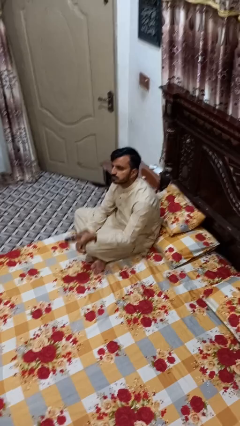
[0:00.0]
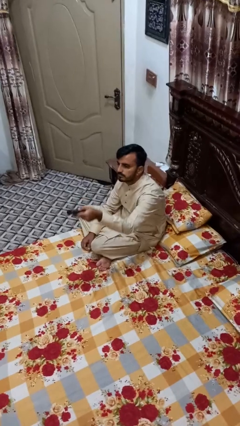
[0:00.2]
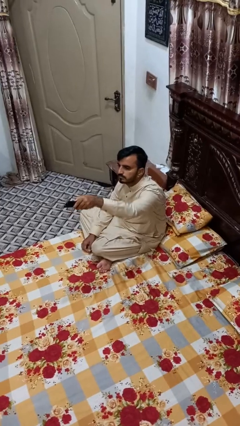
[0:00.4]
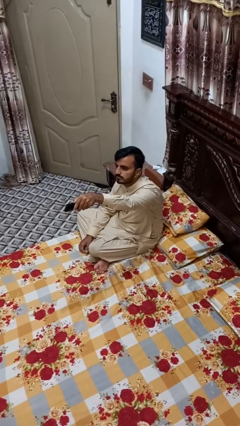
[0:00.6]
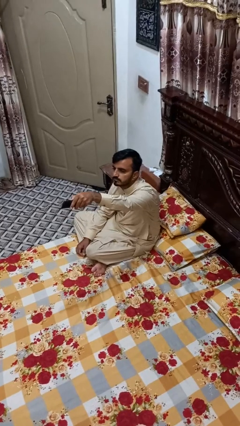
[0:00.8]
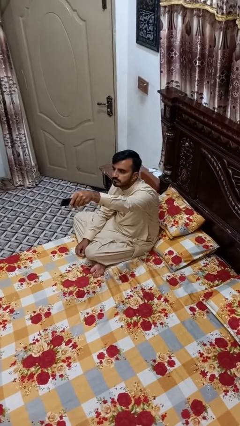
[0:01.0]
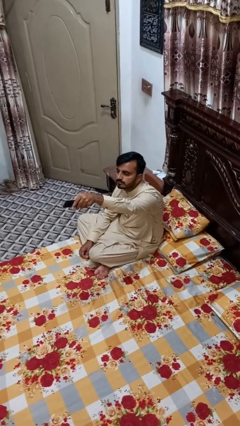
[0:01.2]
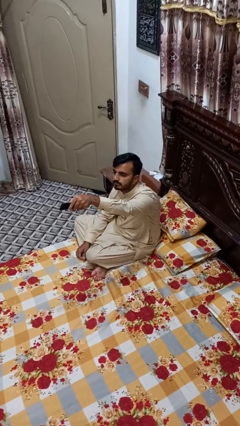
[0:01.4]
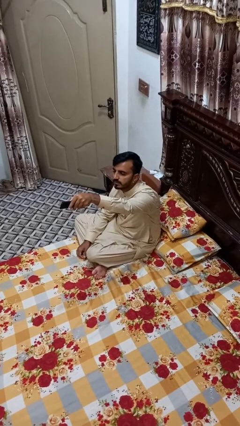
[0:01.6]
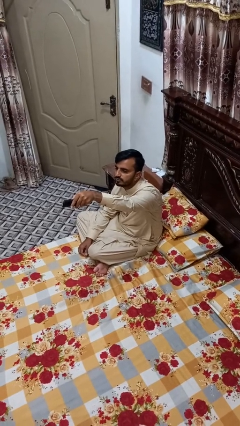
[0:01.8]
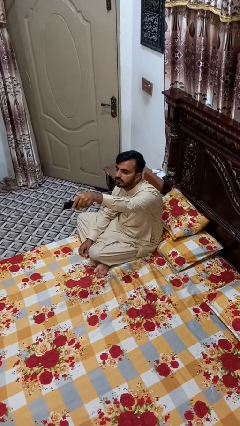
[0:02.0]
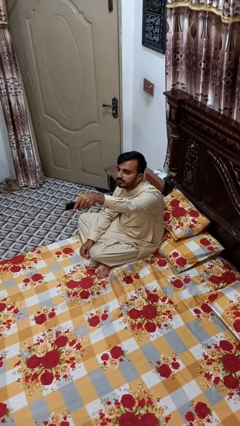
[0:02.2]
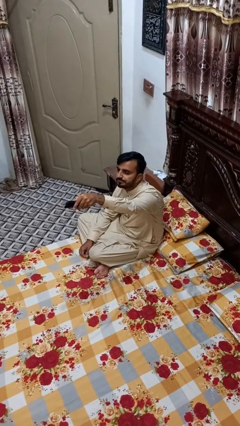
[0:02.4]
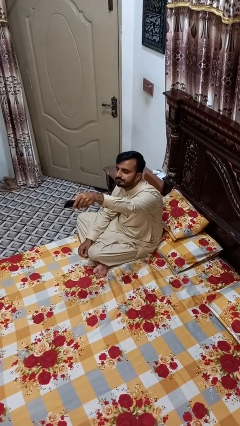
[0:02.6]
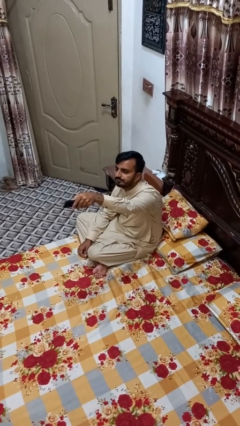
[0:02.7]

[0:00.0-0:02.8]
person uses television remote

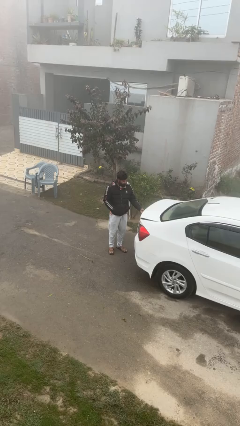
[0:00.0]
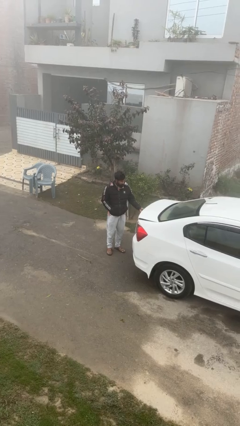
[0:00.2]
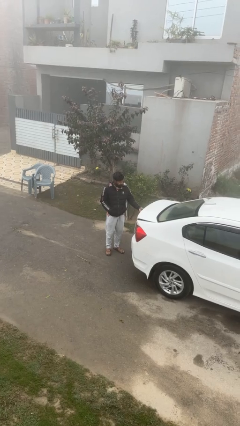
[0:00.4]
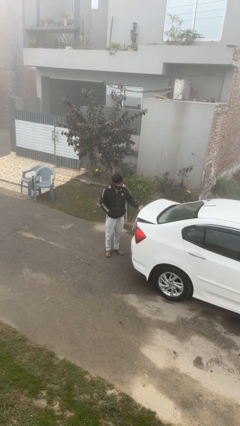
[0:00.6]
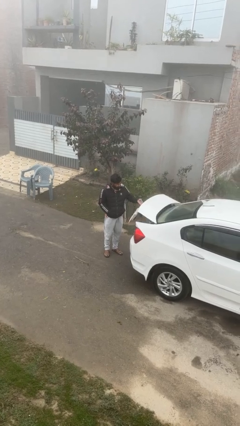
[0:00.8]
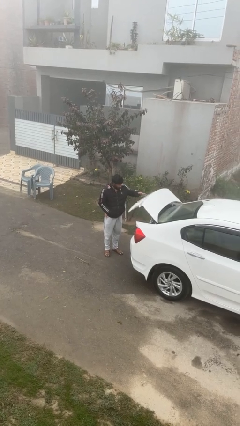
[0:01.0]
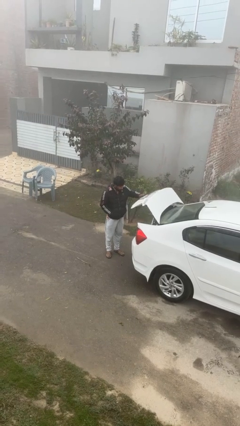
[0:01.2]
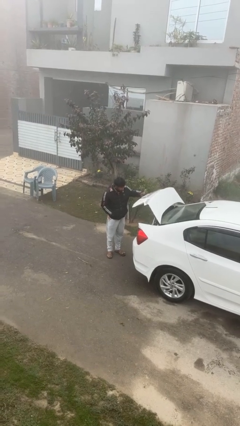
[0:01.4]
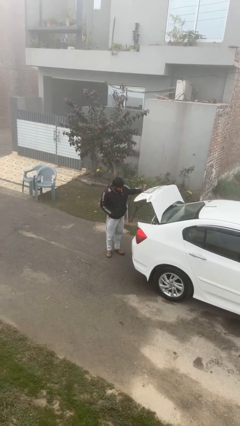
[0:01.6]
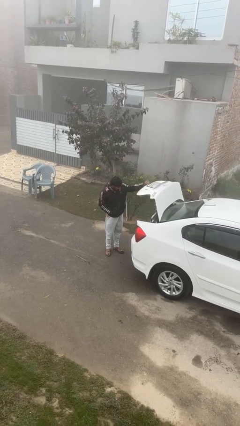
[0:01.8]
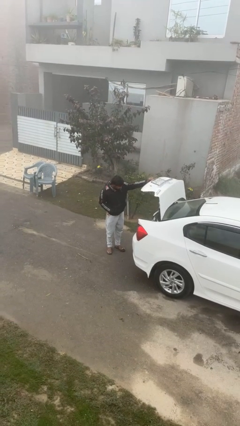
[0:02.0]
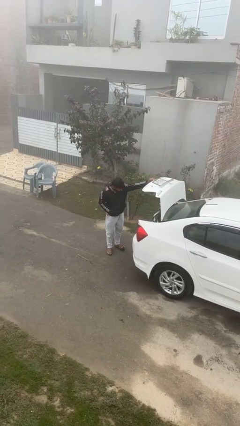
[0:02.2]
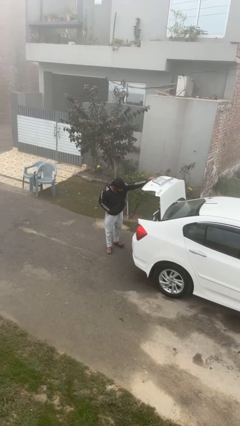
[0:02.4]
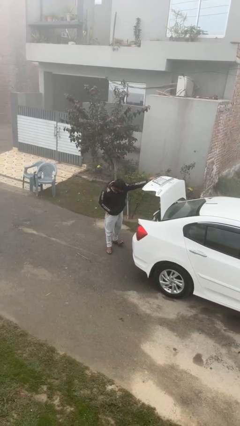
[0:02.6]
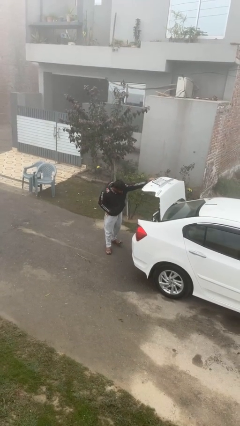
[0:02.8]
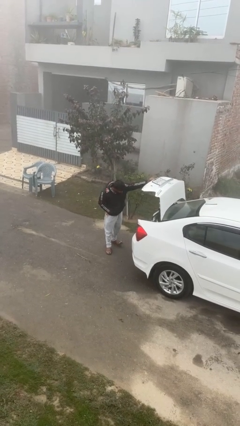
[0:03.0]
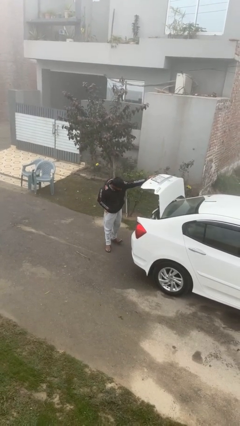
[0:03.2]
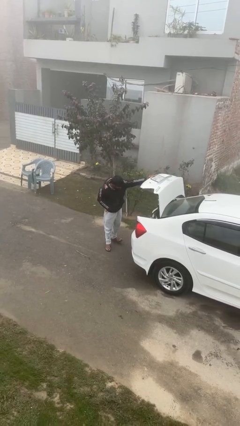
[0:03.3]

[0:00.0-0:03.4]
person opens car trunk

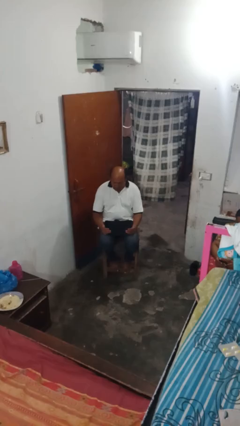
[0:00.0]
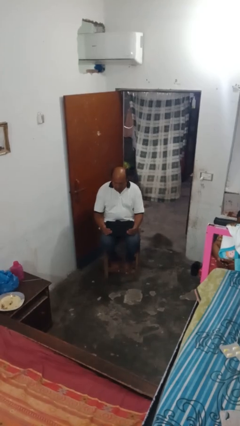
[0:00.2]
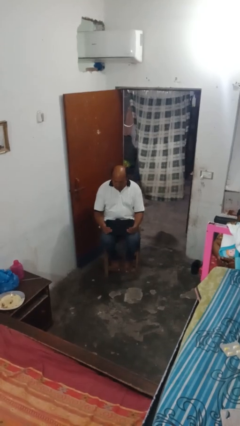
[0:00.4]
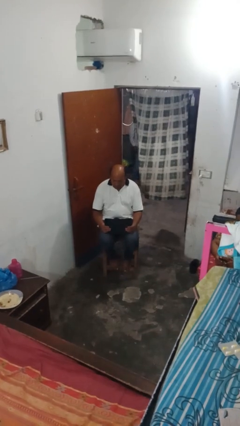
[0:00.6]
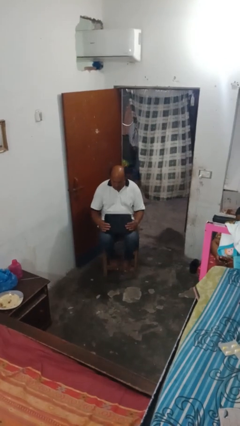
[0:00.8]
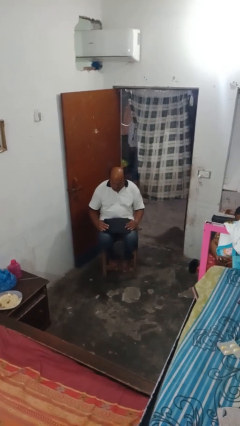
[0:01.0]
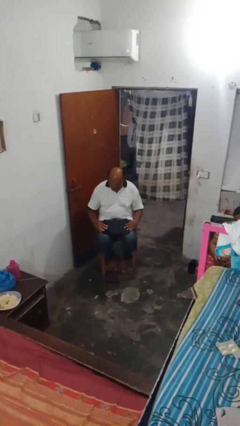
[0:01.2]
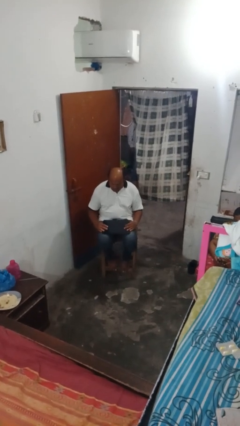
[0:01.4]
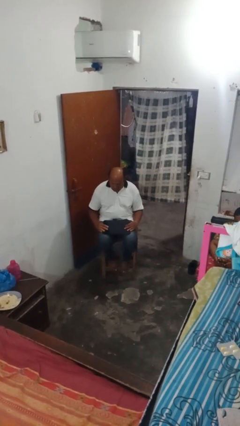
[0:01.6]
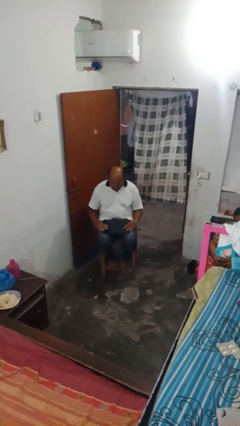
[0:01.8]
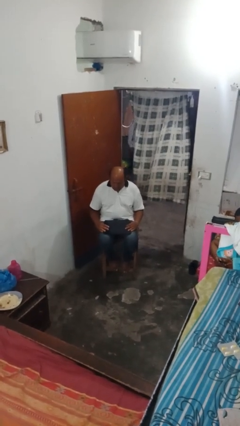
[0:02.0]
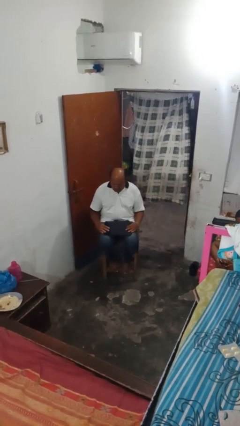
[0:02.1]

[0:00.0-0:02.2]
person closes laptop

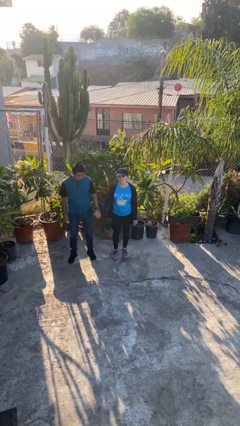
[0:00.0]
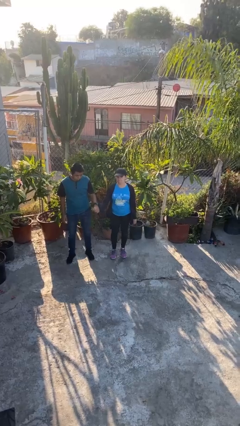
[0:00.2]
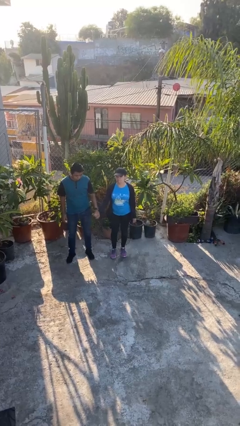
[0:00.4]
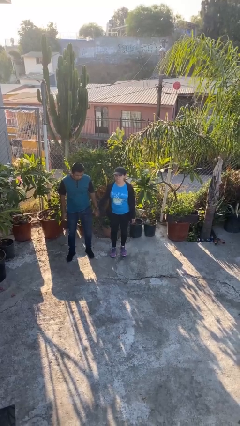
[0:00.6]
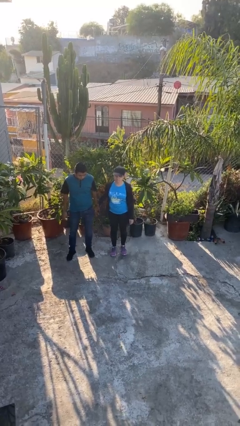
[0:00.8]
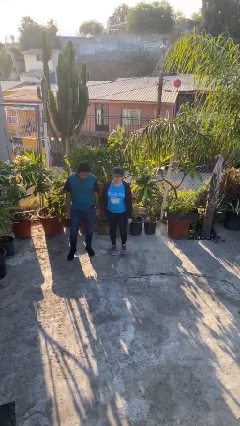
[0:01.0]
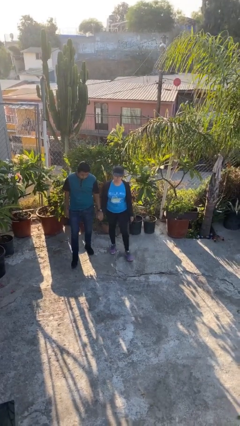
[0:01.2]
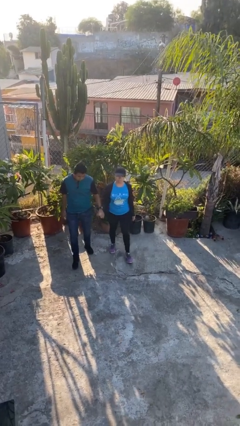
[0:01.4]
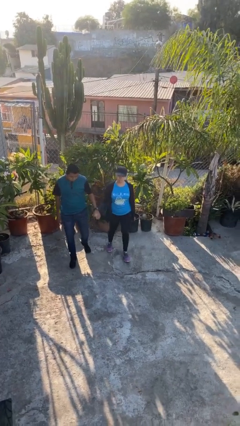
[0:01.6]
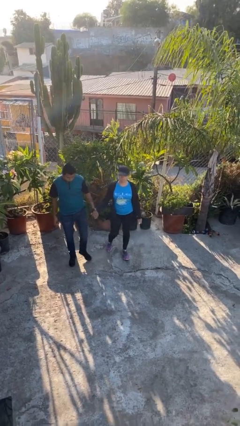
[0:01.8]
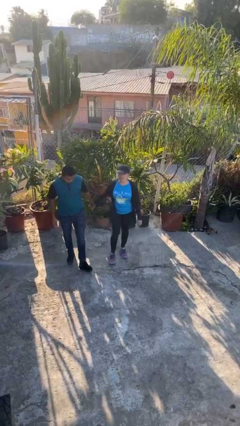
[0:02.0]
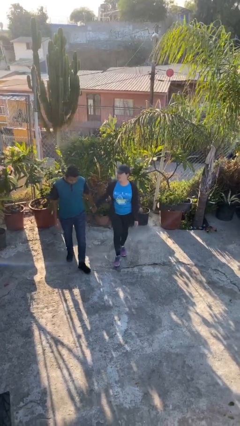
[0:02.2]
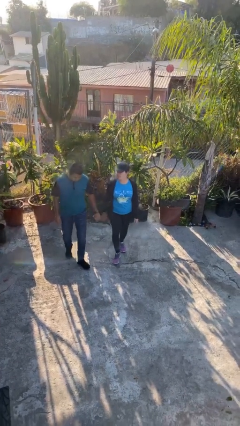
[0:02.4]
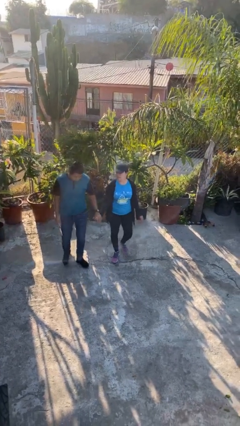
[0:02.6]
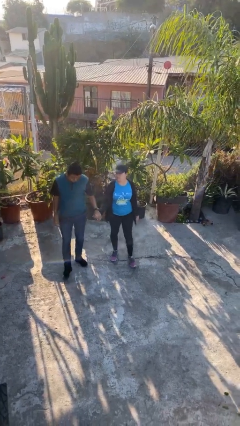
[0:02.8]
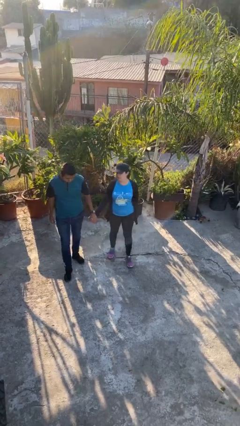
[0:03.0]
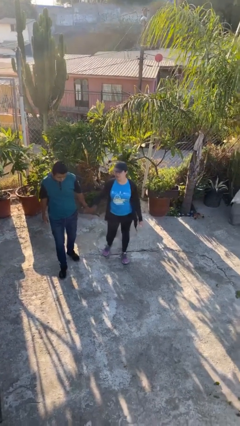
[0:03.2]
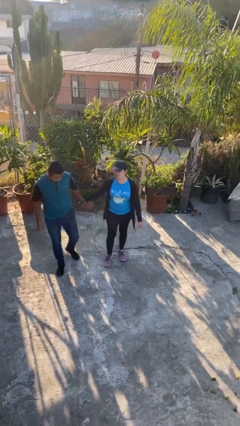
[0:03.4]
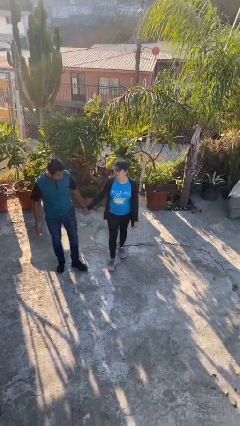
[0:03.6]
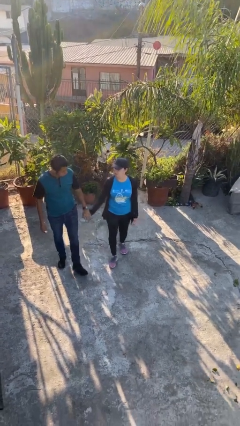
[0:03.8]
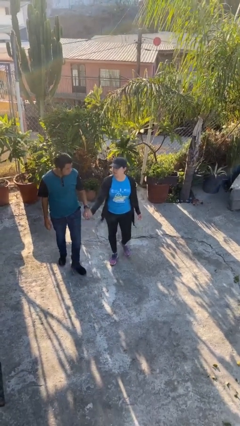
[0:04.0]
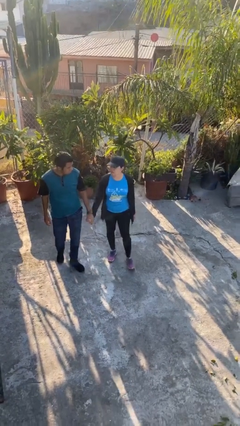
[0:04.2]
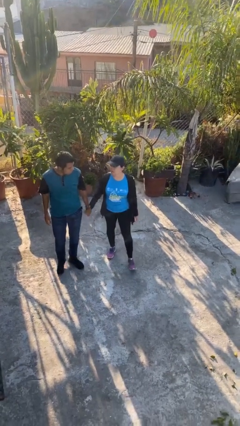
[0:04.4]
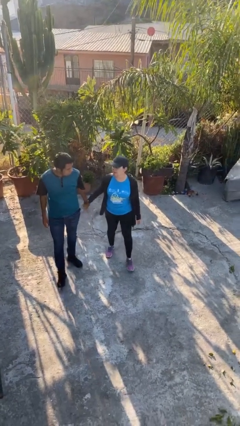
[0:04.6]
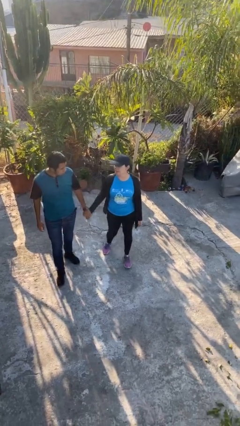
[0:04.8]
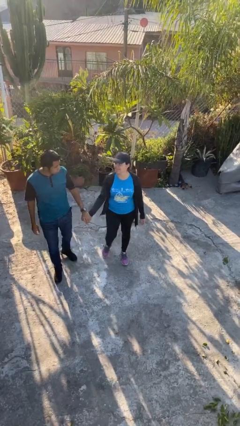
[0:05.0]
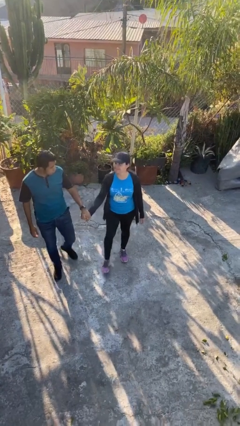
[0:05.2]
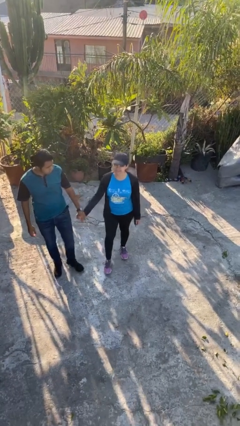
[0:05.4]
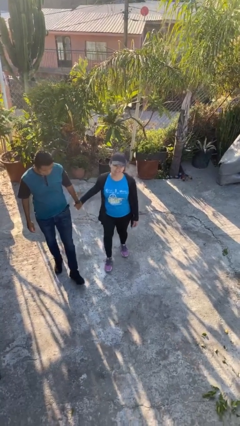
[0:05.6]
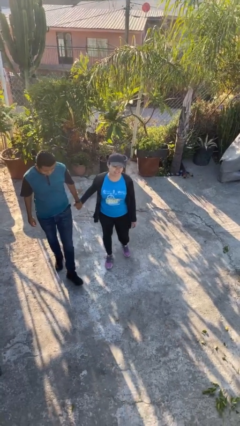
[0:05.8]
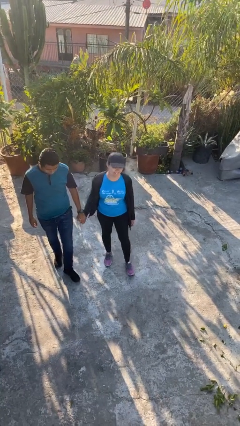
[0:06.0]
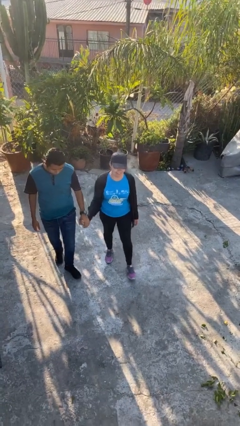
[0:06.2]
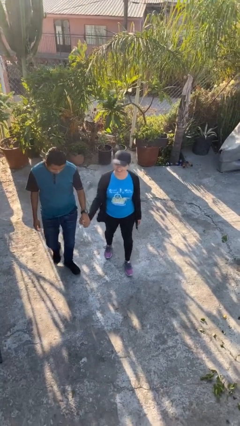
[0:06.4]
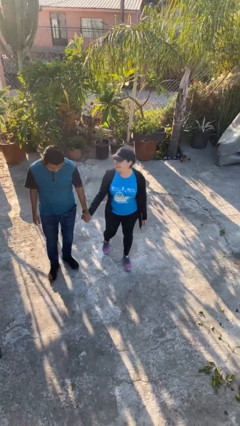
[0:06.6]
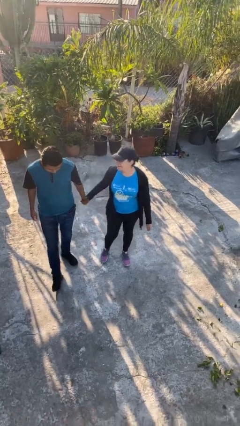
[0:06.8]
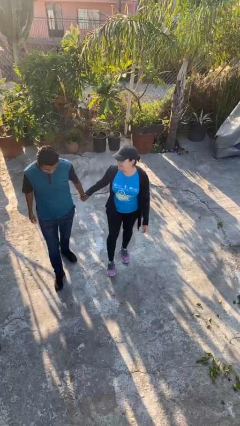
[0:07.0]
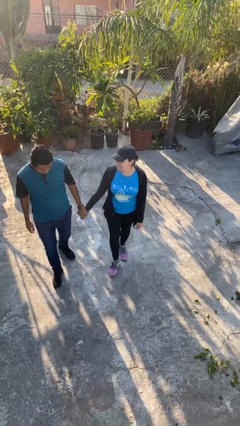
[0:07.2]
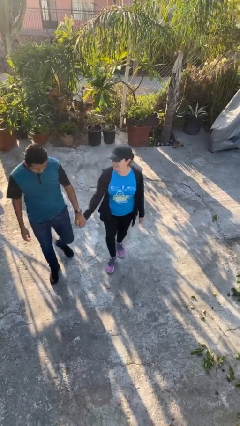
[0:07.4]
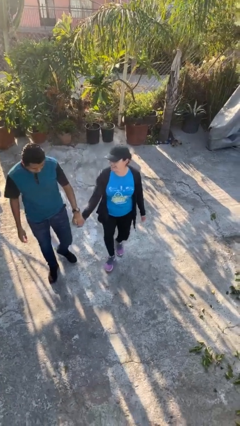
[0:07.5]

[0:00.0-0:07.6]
person holds hand

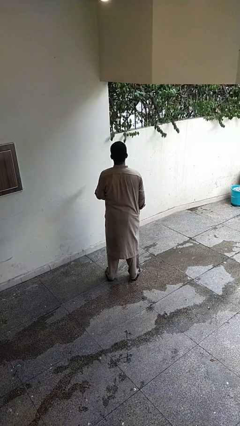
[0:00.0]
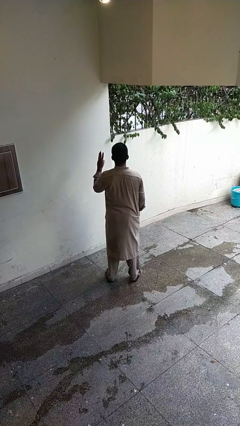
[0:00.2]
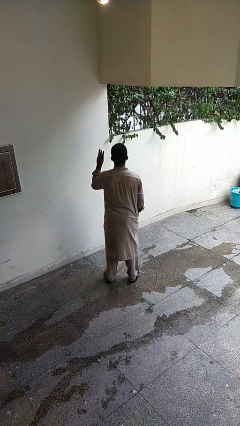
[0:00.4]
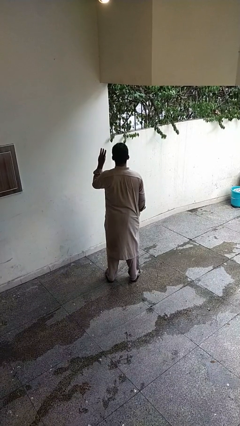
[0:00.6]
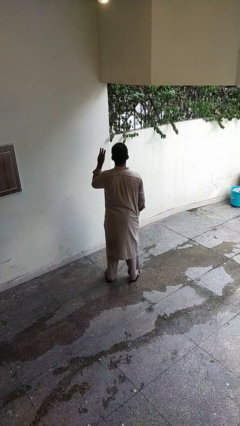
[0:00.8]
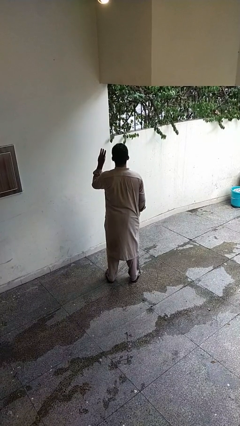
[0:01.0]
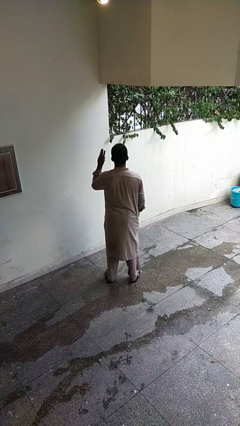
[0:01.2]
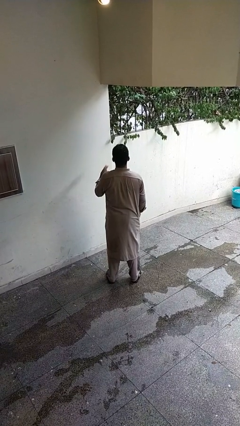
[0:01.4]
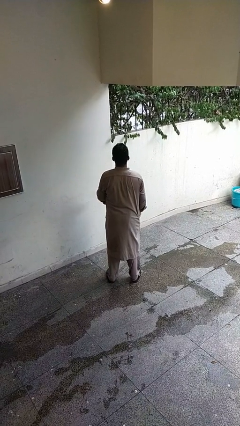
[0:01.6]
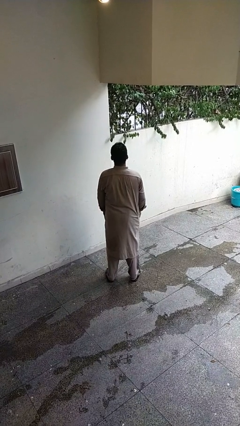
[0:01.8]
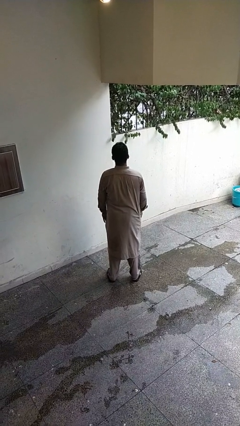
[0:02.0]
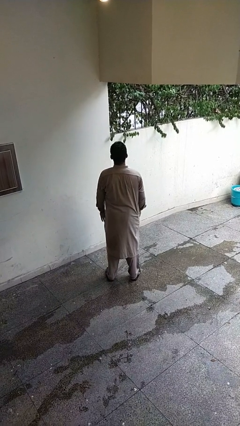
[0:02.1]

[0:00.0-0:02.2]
person gestures number three
